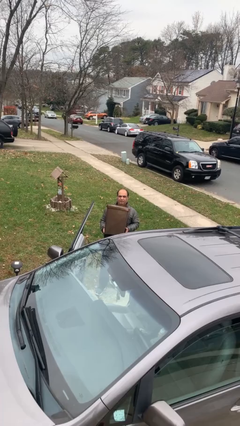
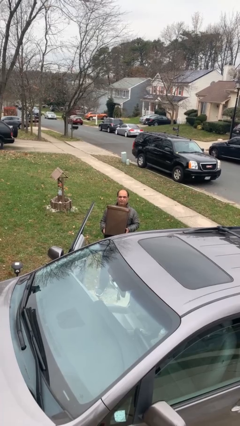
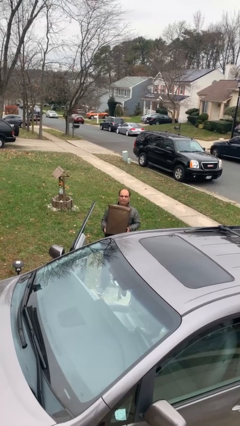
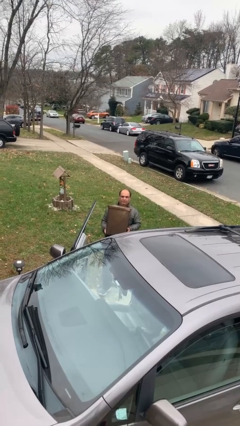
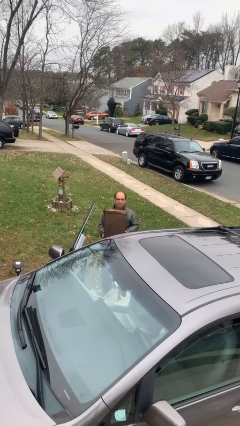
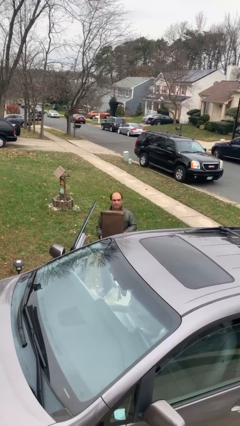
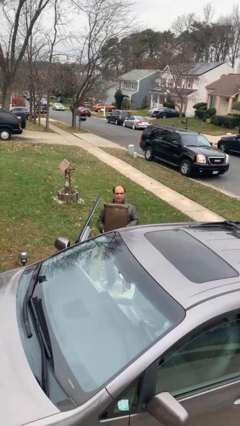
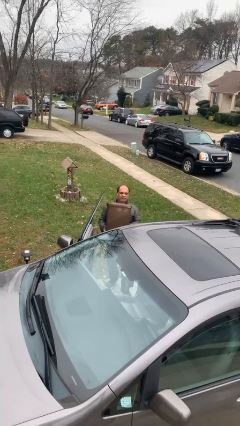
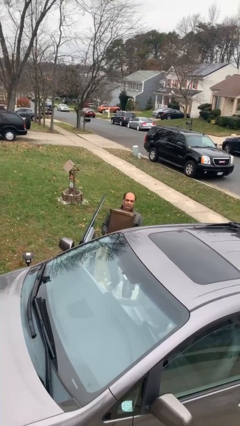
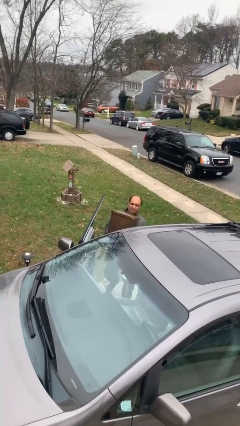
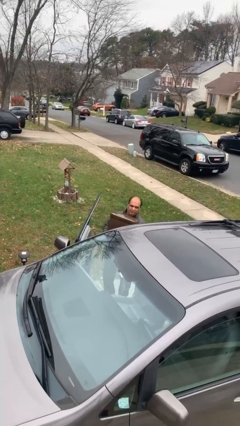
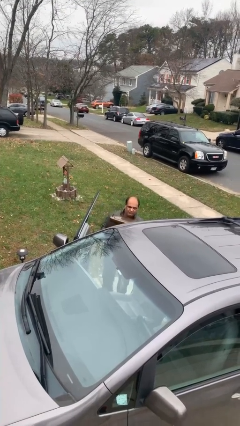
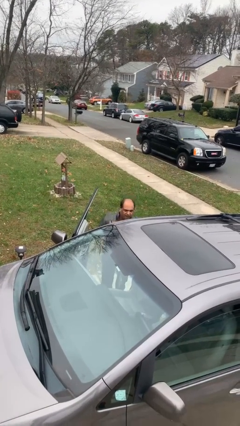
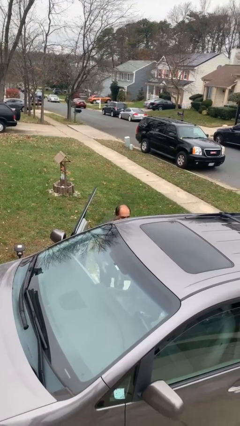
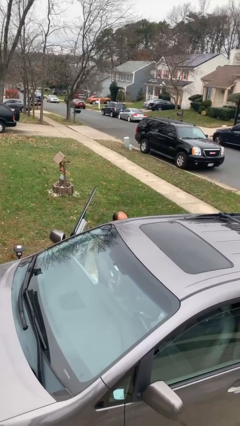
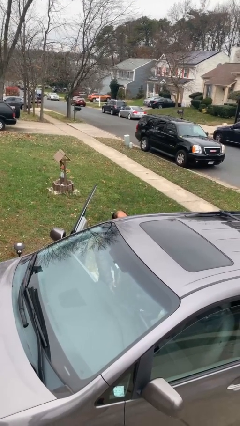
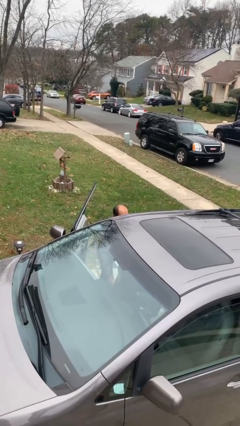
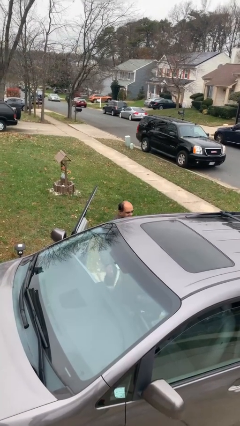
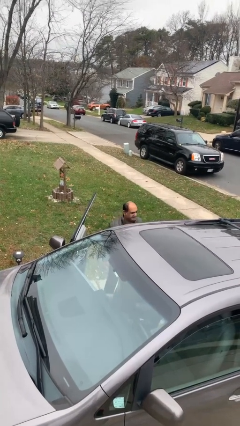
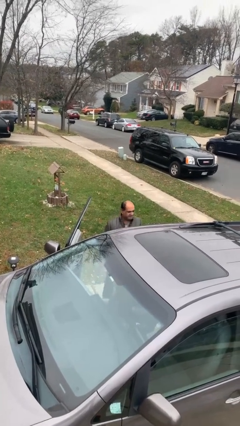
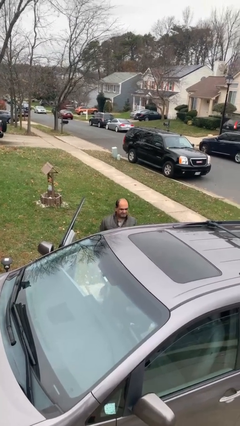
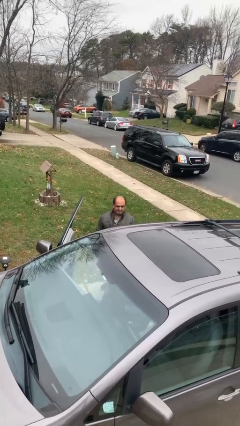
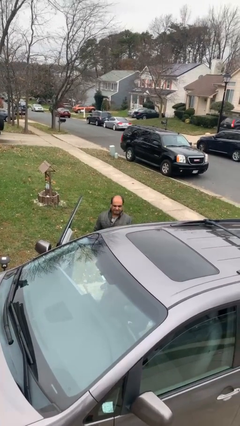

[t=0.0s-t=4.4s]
person loads car

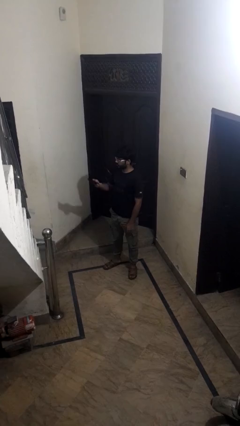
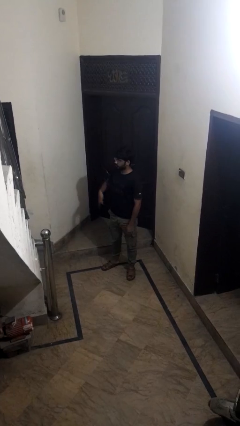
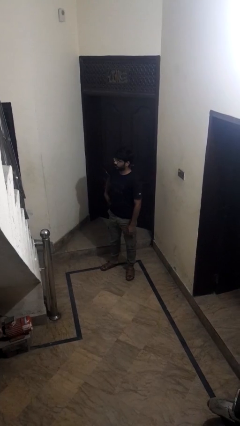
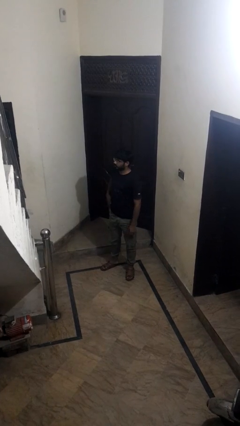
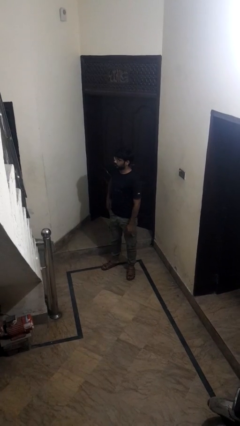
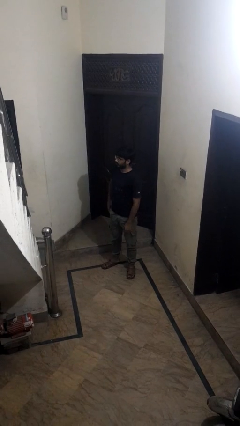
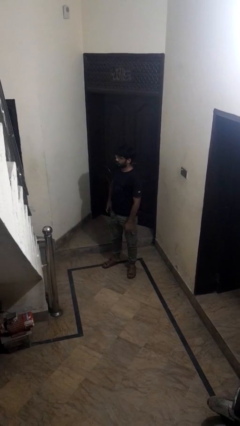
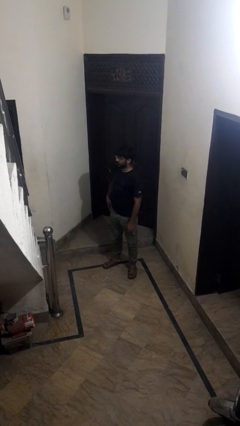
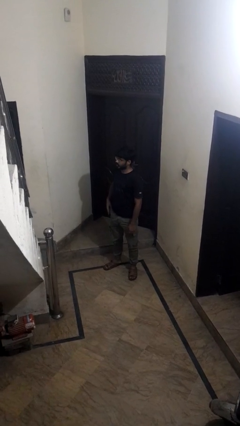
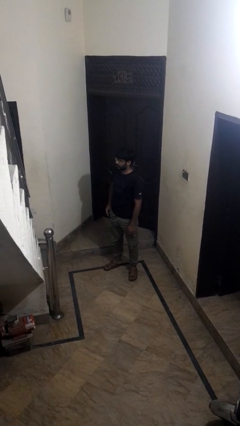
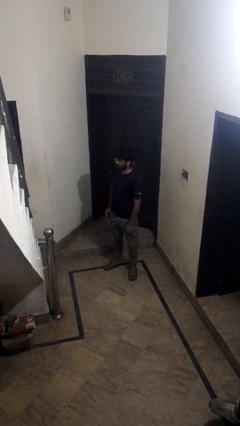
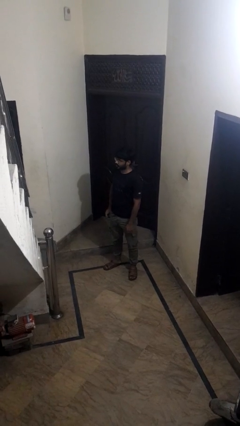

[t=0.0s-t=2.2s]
person puts phone into pocket

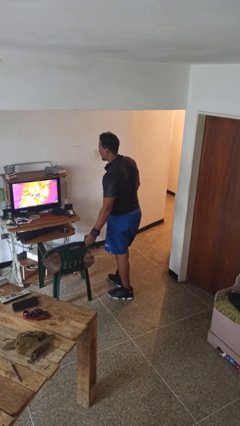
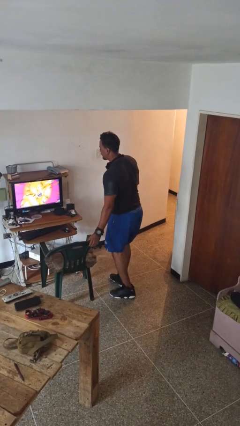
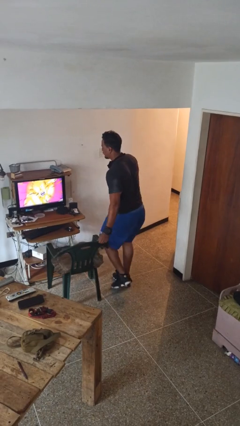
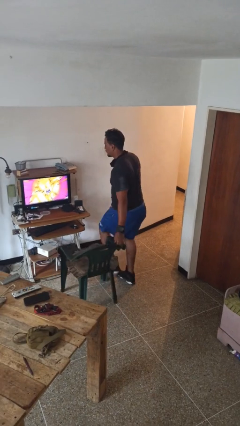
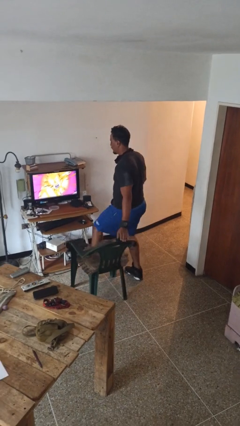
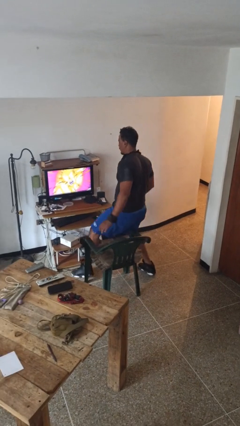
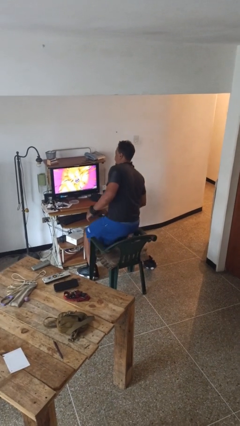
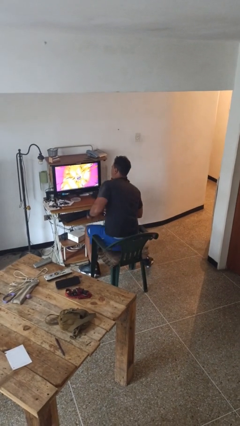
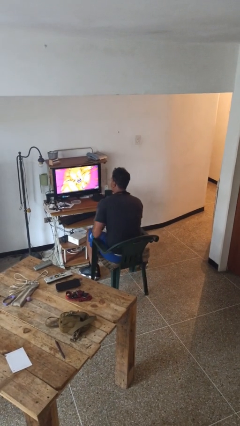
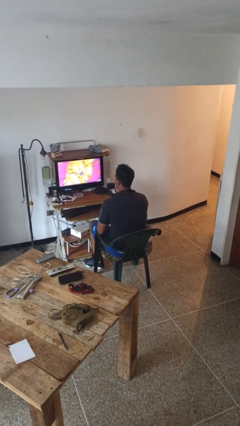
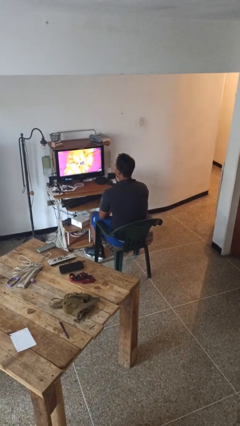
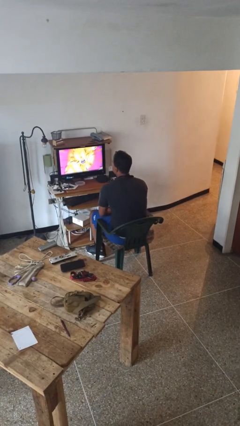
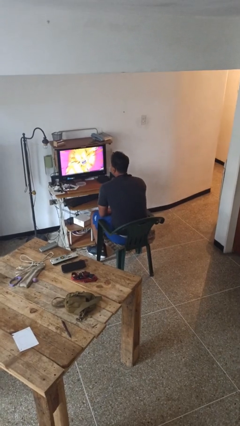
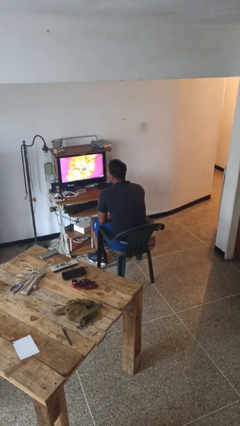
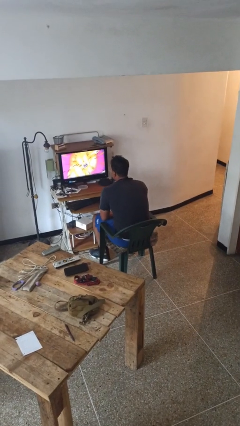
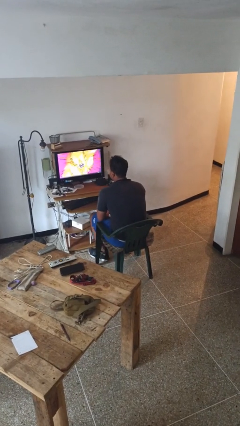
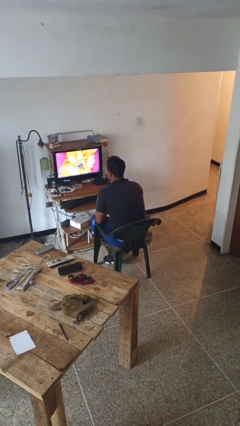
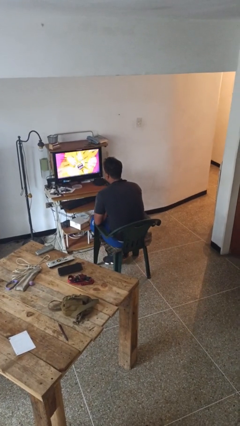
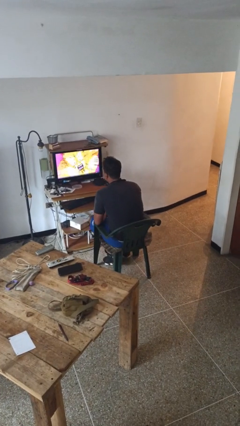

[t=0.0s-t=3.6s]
person sits down

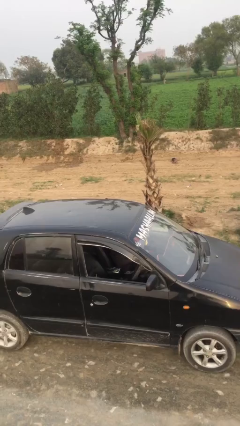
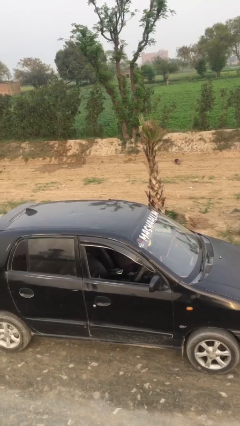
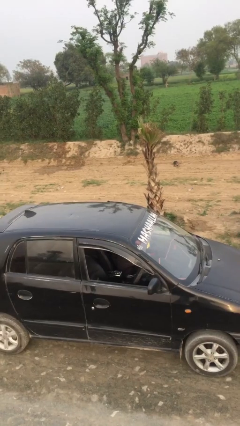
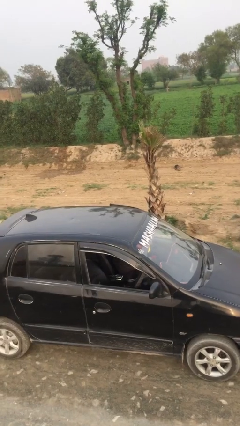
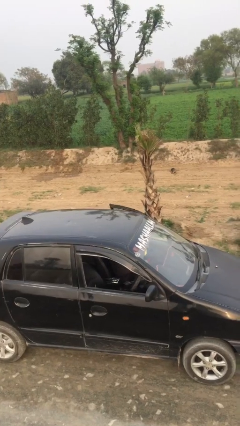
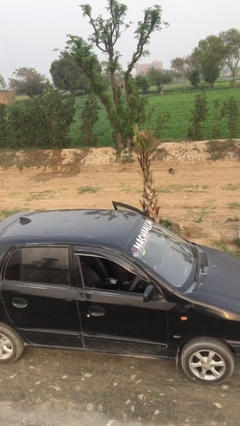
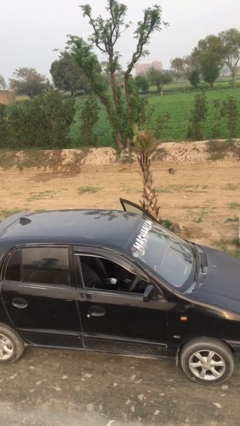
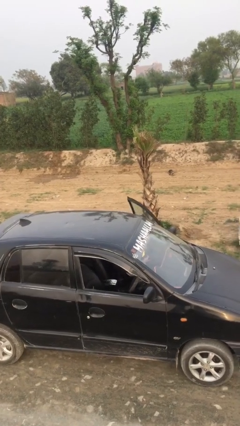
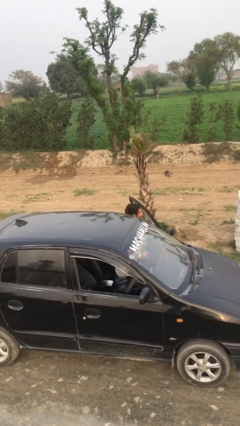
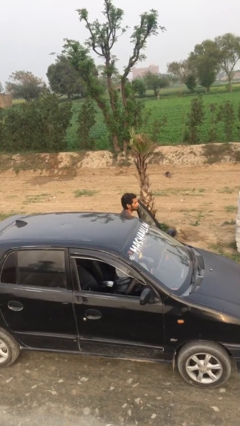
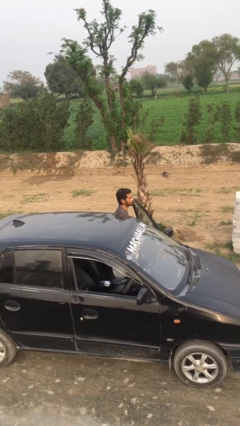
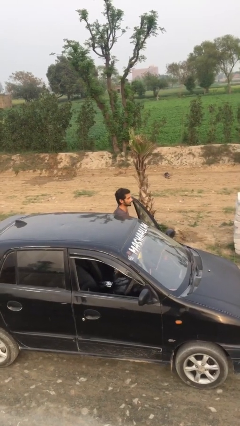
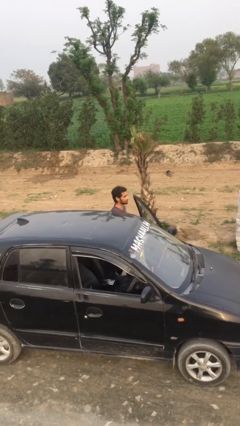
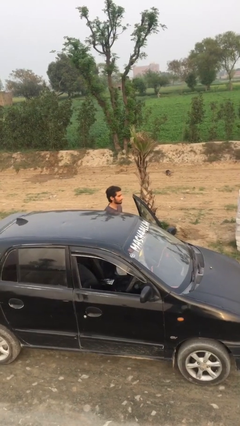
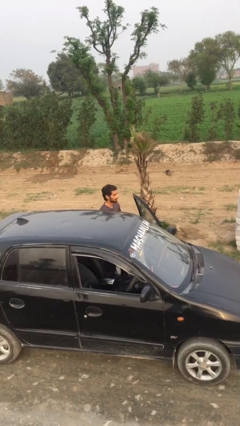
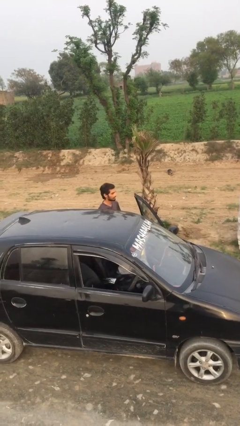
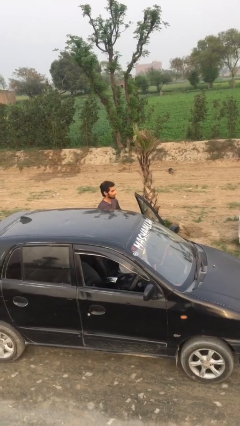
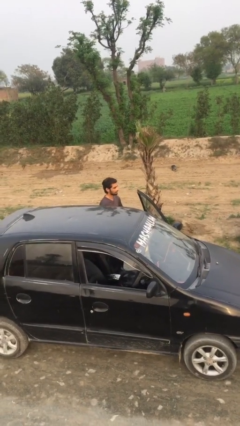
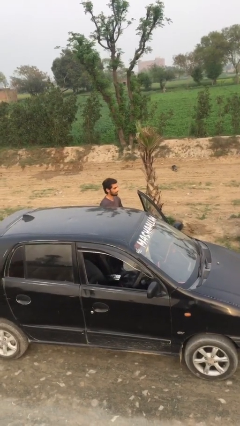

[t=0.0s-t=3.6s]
person exits car

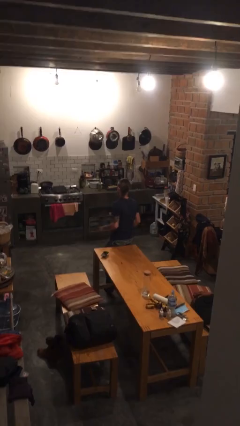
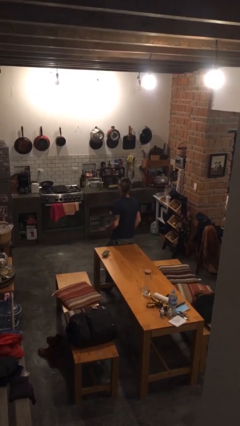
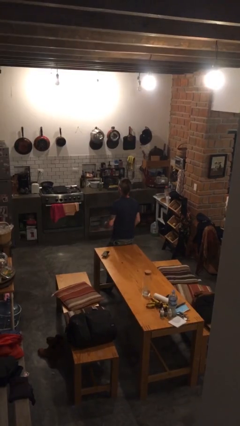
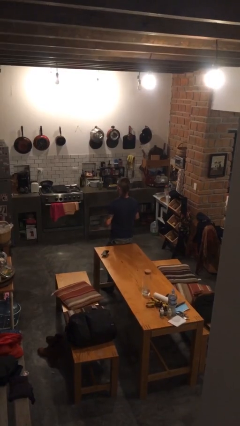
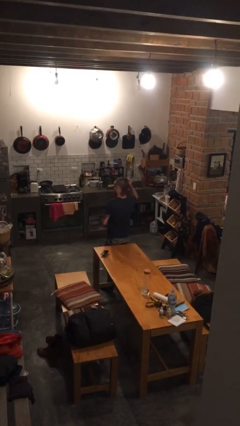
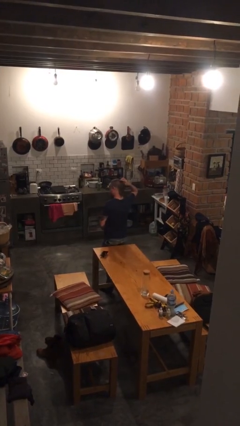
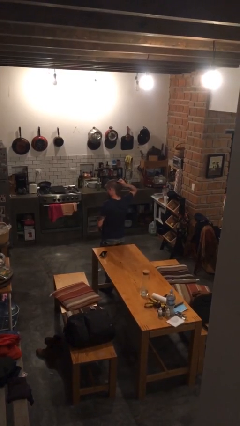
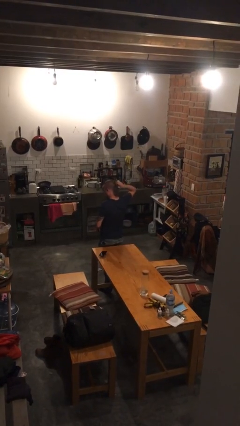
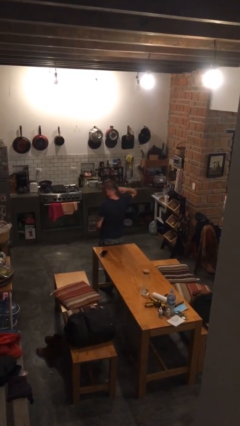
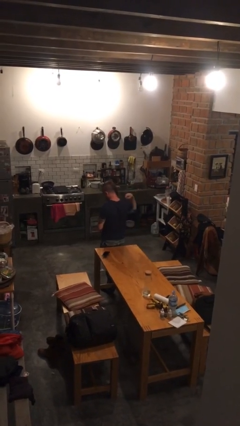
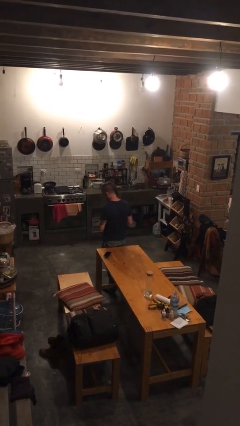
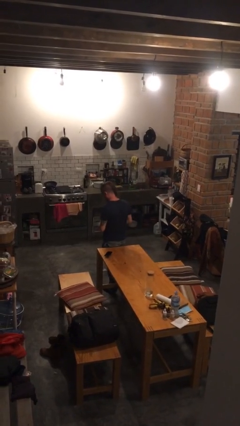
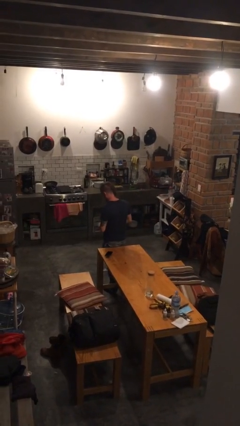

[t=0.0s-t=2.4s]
person takes off hairtie

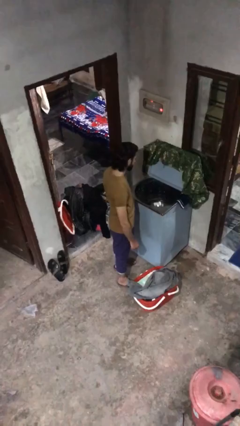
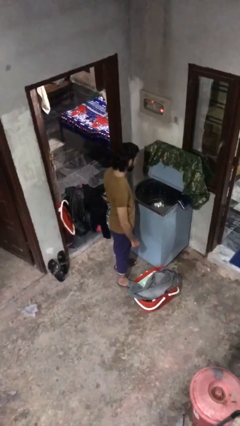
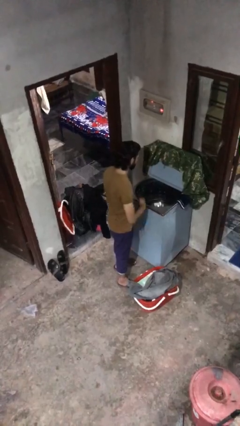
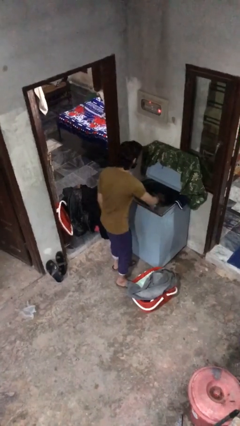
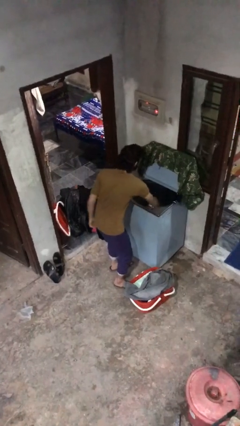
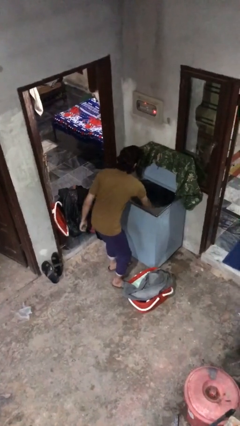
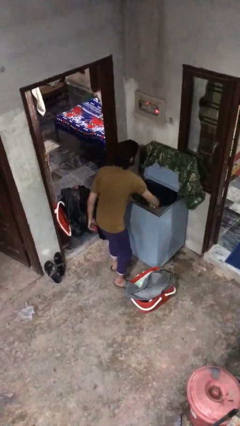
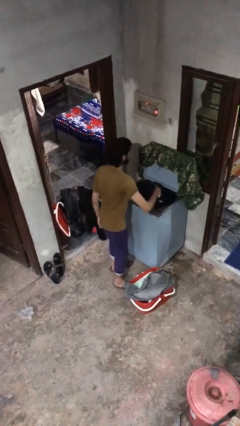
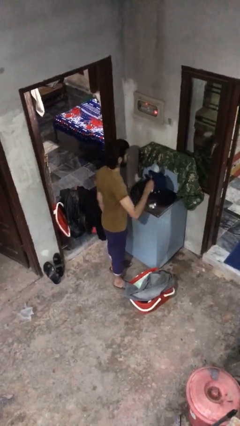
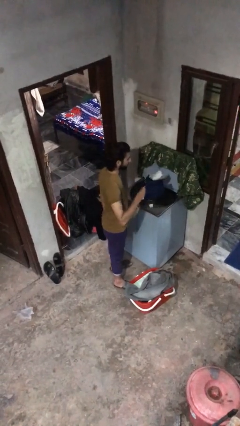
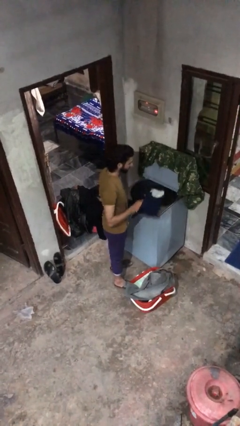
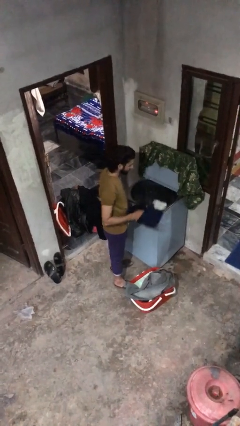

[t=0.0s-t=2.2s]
person loads clotheswasher
